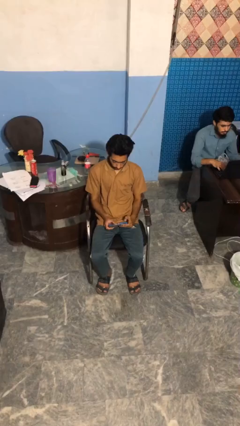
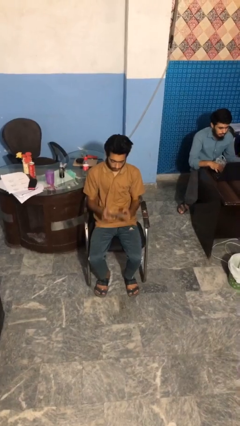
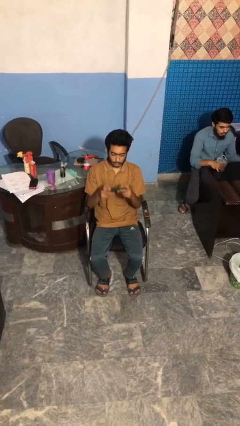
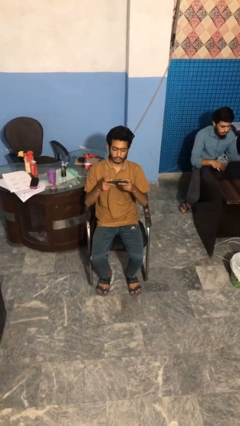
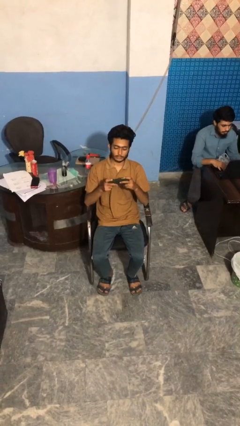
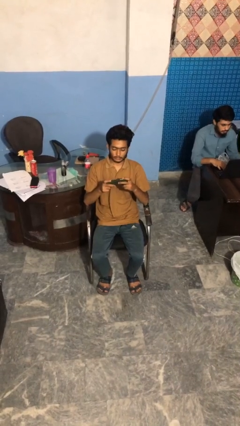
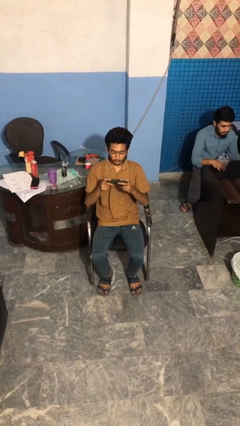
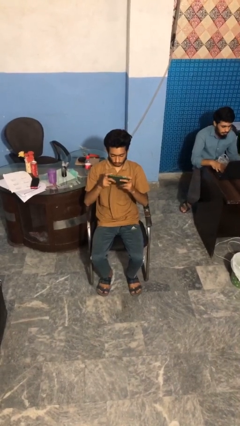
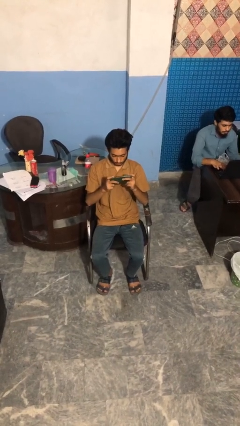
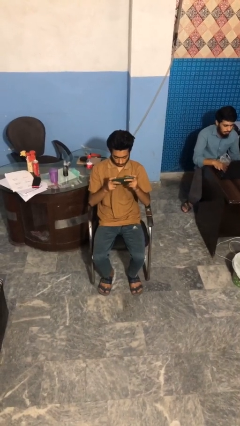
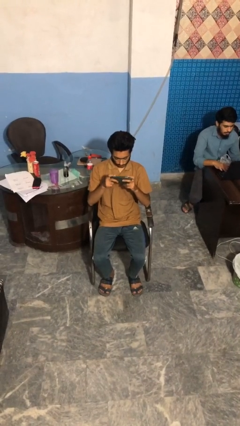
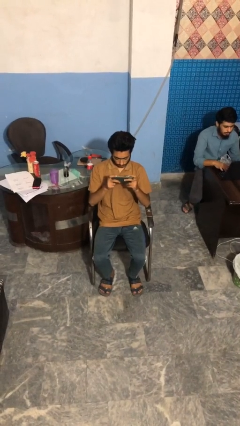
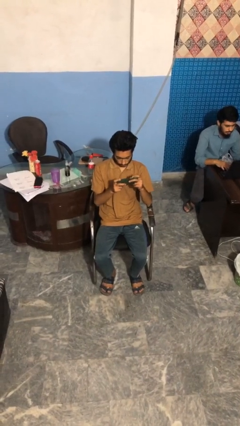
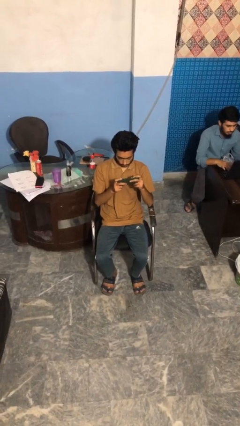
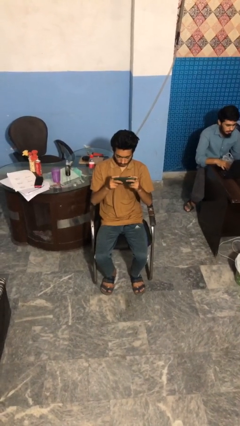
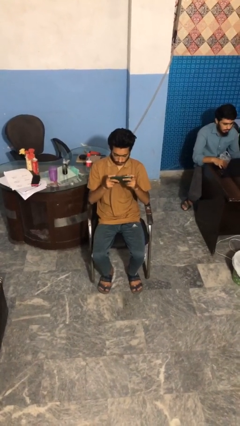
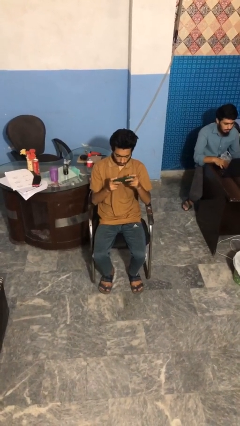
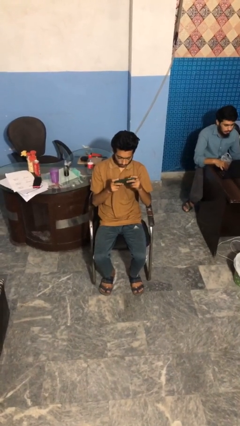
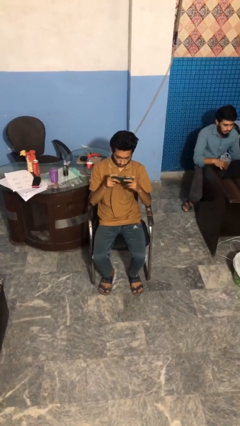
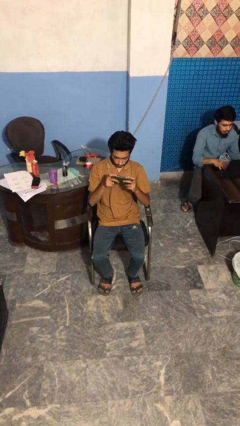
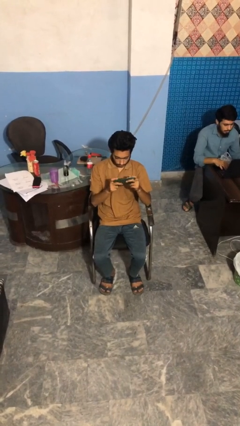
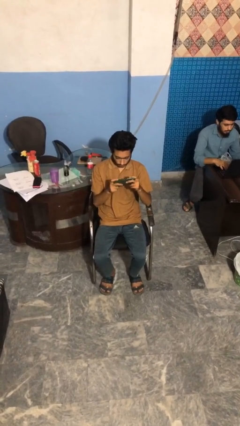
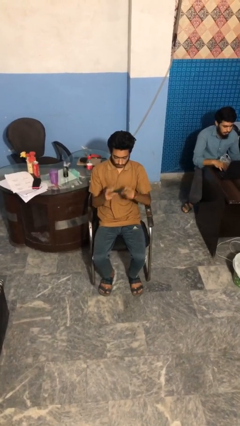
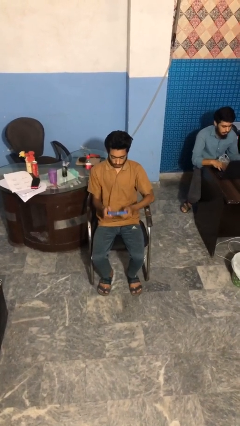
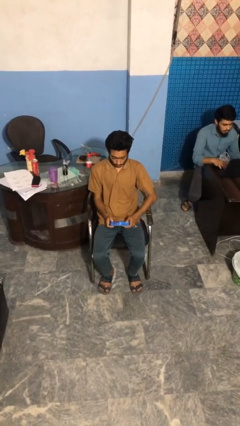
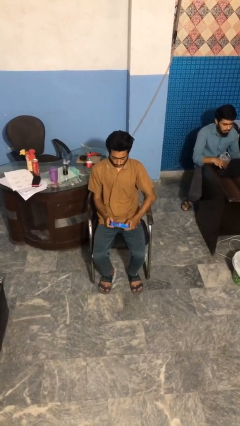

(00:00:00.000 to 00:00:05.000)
person interacts with handheld game

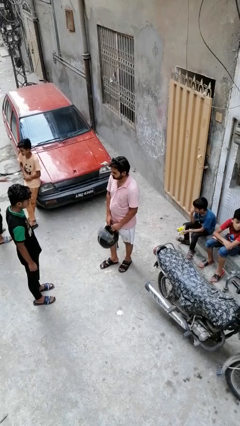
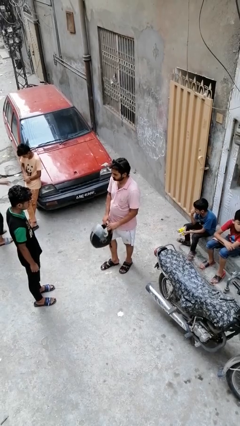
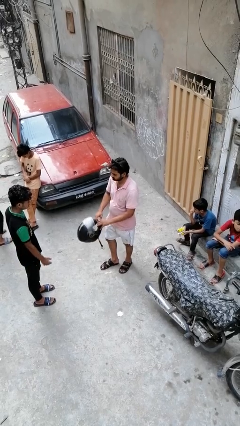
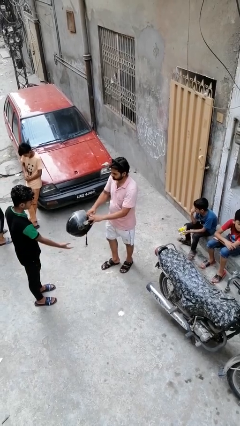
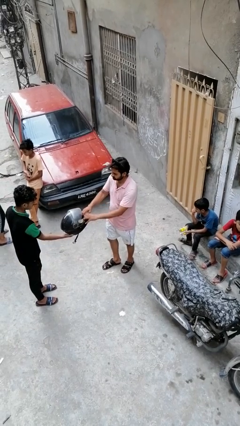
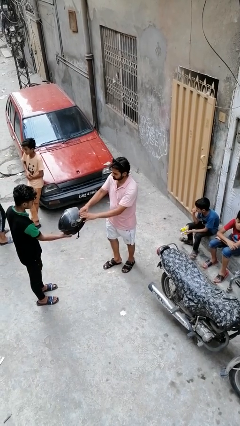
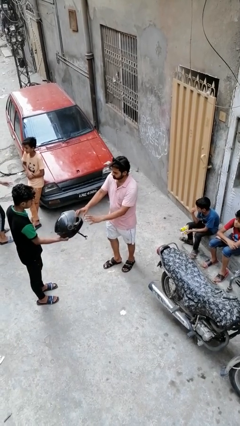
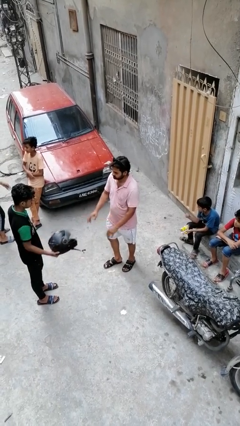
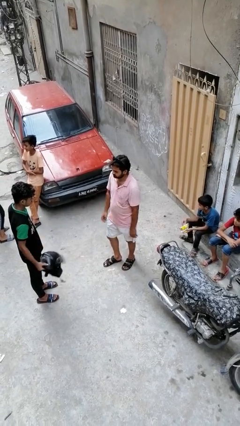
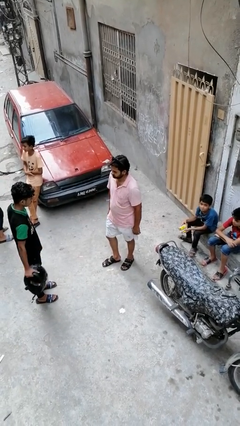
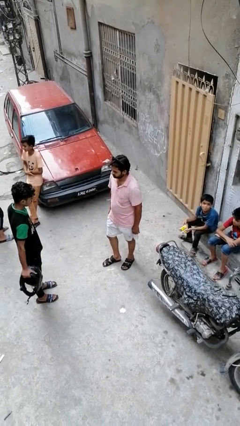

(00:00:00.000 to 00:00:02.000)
person transfers object to person

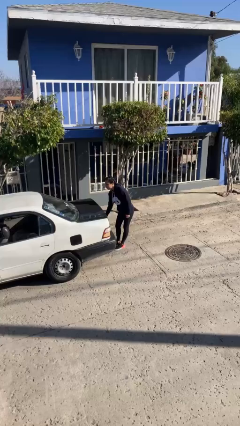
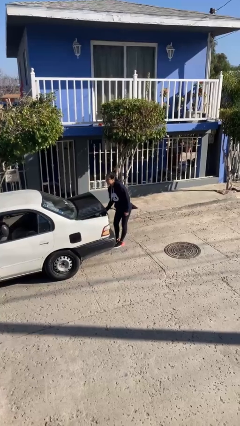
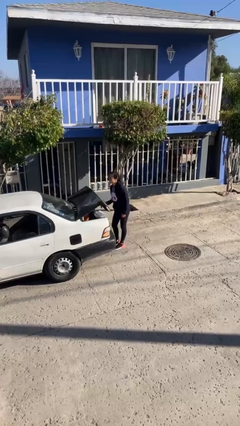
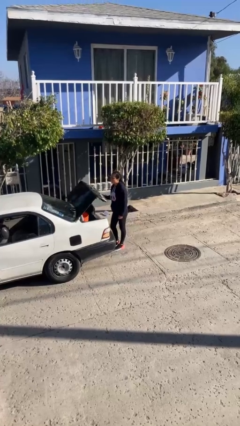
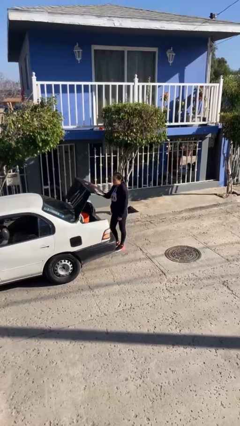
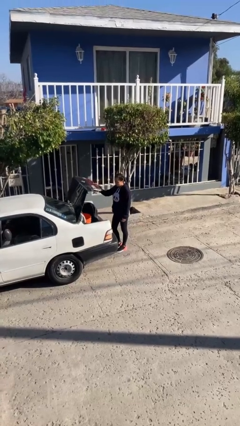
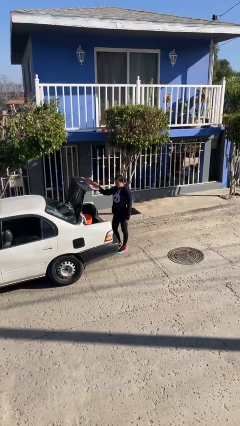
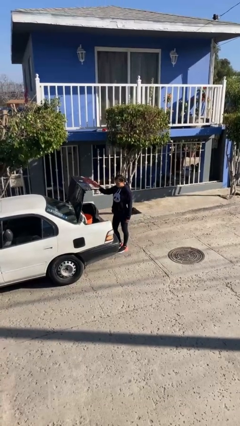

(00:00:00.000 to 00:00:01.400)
person opens car trunk

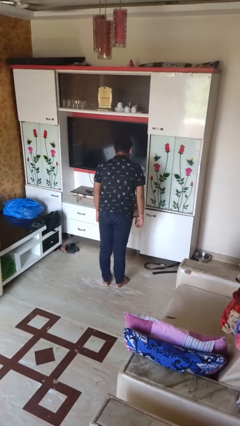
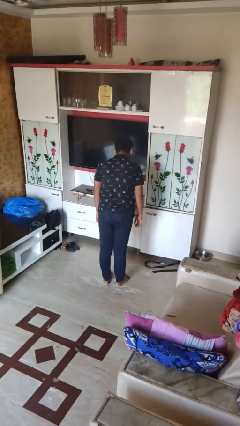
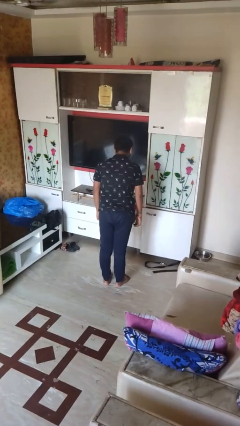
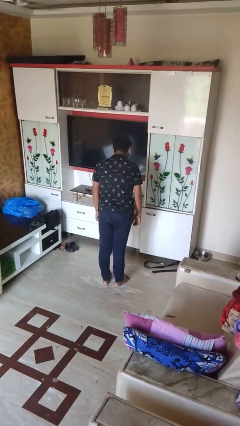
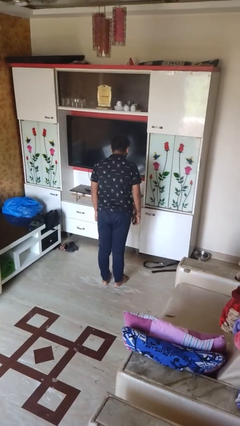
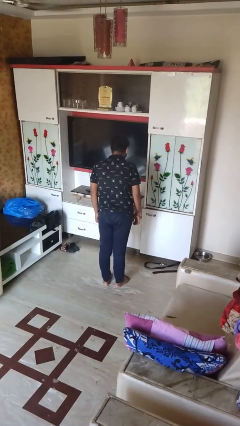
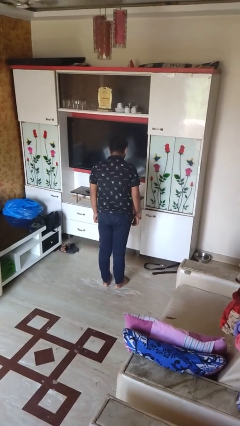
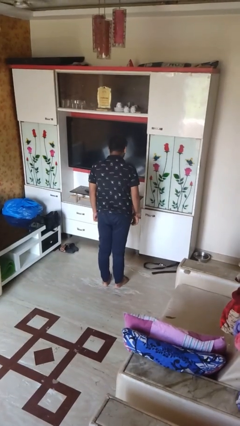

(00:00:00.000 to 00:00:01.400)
person wiggles hips

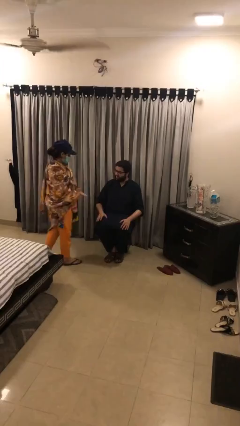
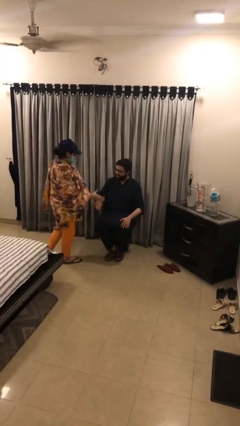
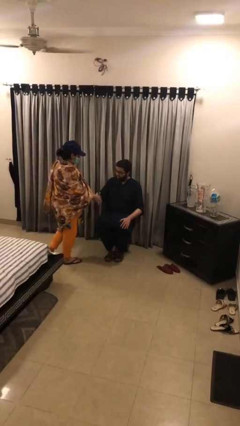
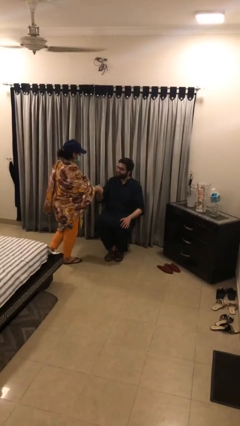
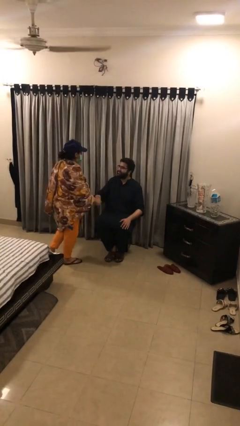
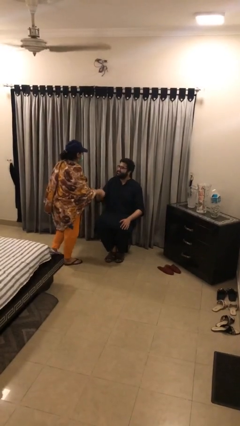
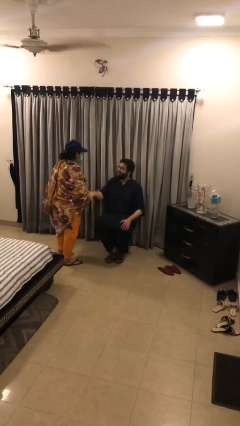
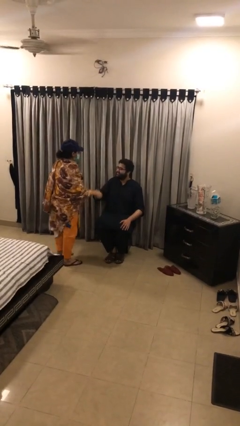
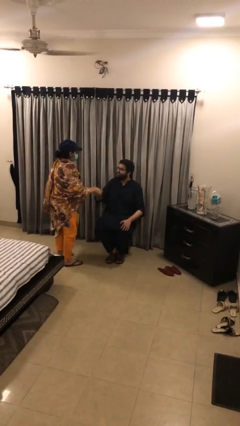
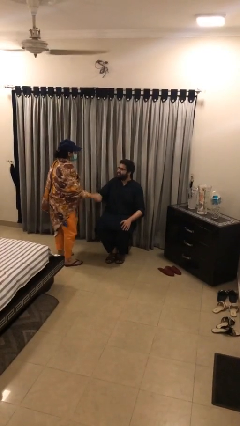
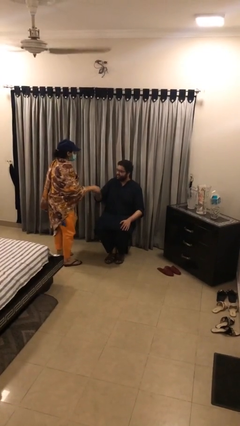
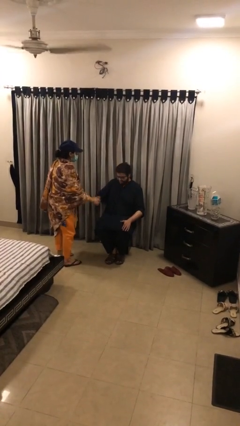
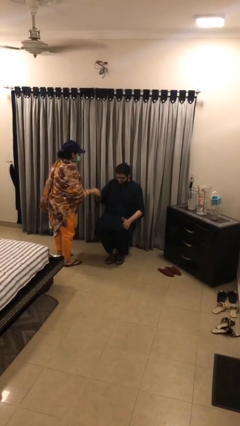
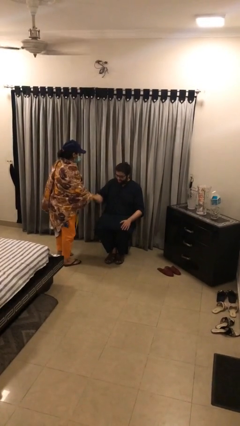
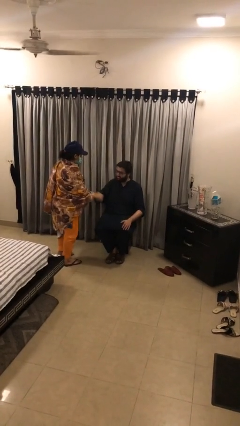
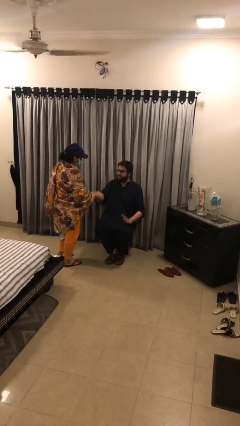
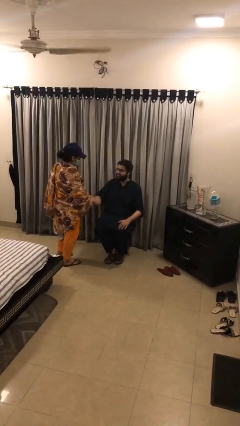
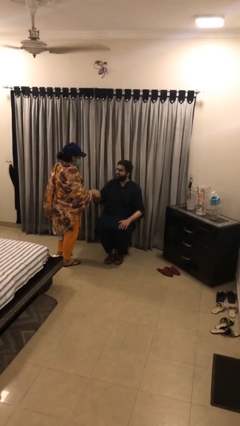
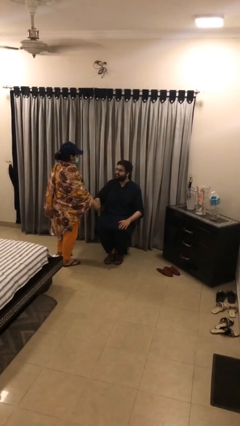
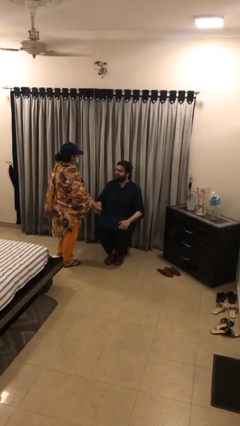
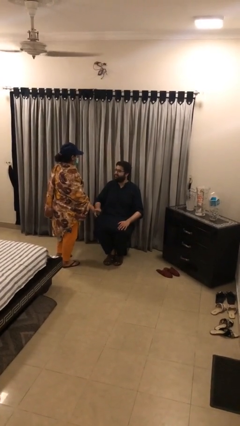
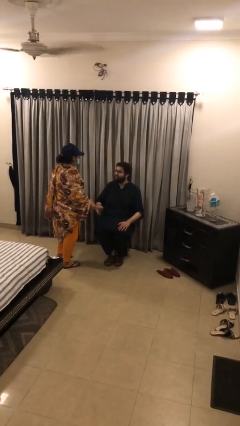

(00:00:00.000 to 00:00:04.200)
person shakes hand

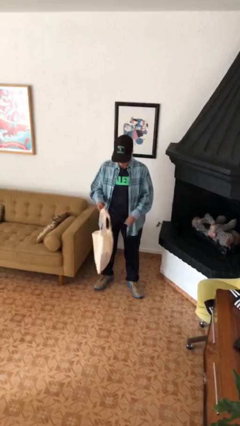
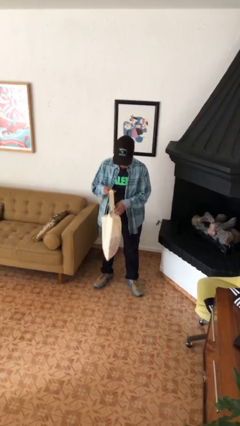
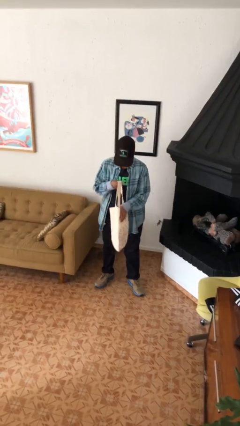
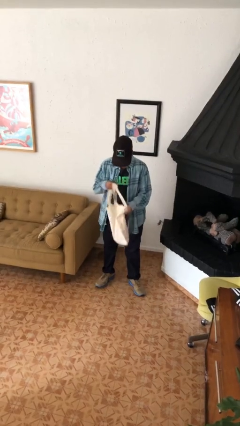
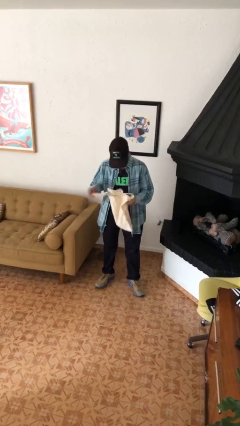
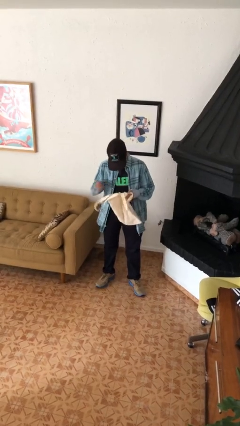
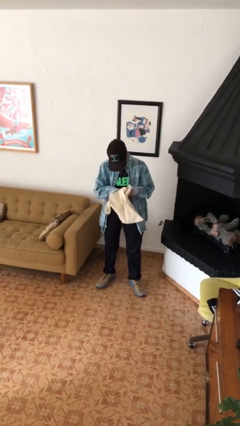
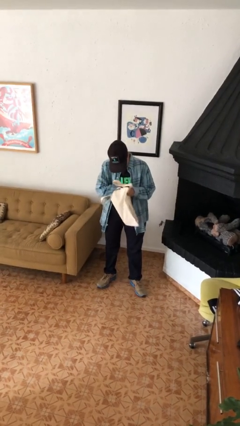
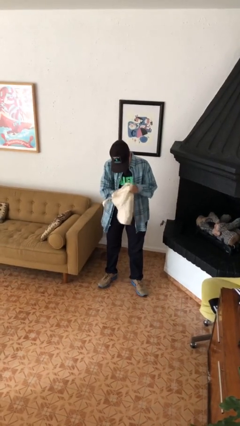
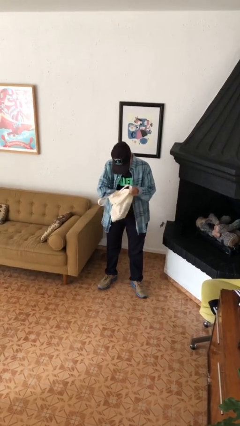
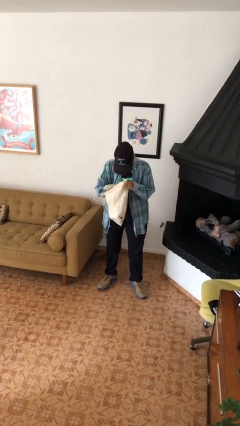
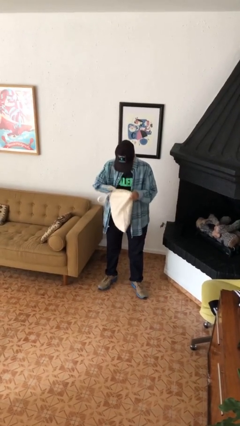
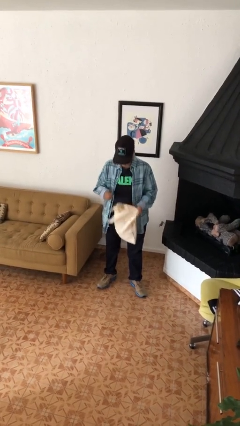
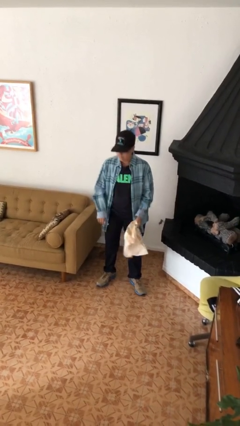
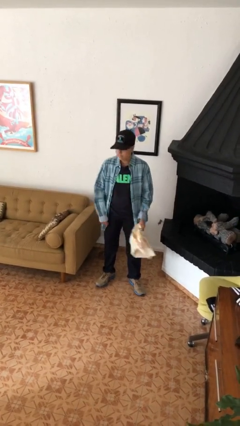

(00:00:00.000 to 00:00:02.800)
person searches in bag

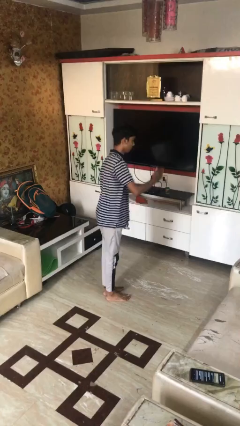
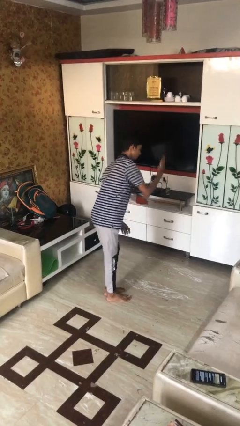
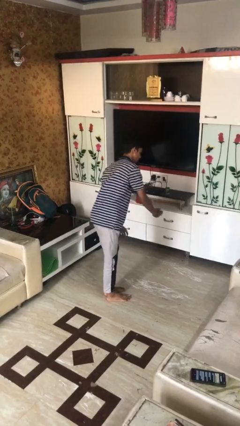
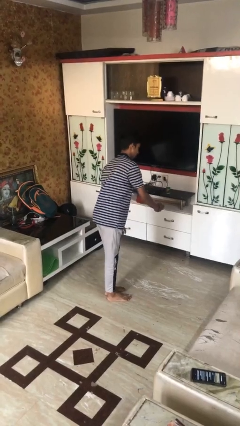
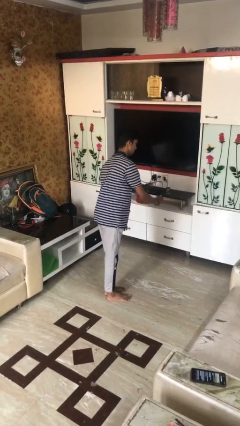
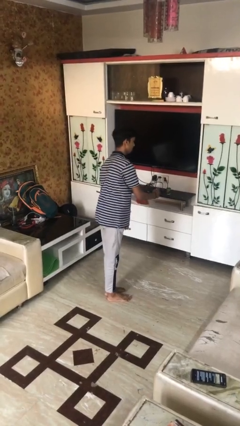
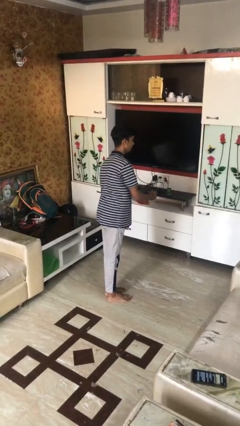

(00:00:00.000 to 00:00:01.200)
person karate chop
